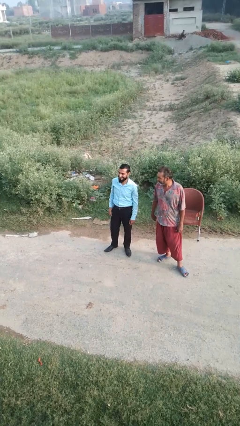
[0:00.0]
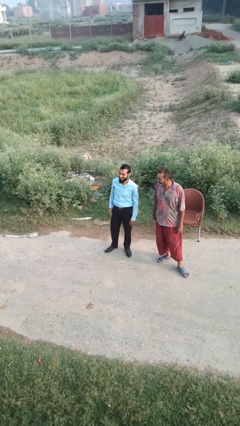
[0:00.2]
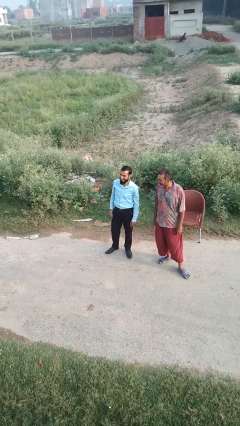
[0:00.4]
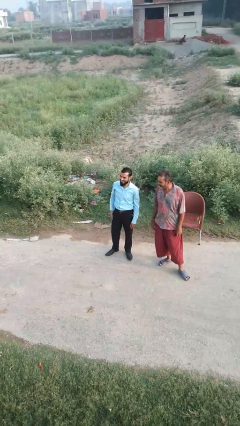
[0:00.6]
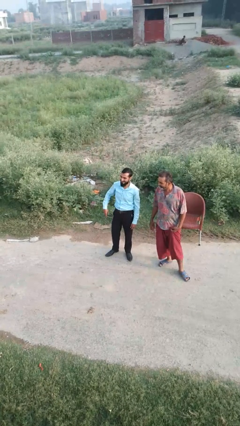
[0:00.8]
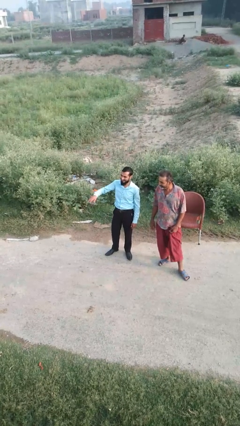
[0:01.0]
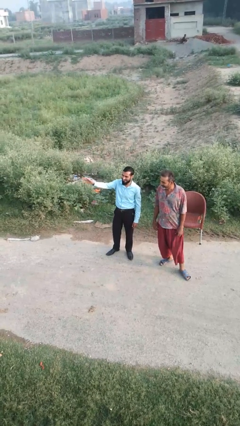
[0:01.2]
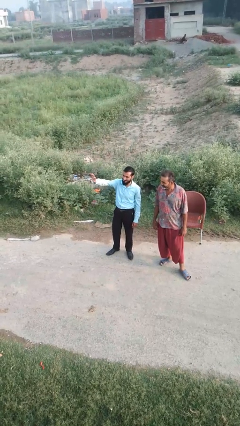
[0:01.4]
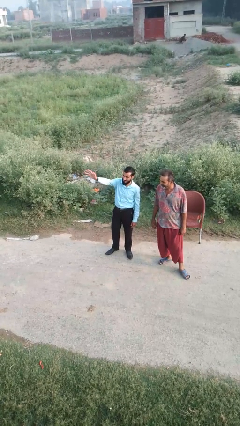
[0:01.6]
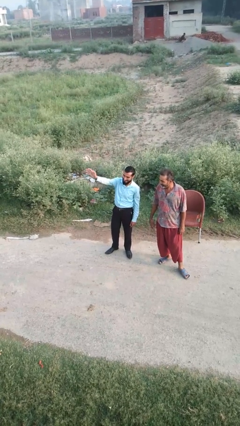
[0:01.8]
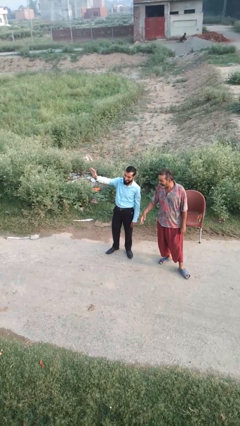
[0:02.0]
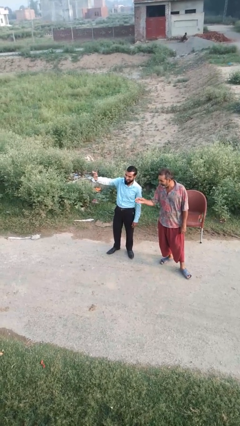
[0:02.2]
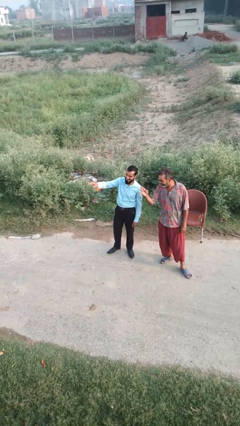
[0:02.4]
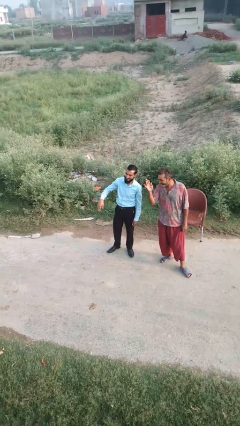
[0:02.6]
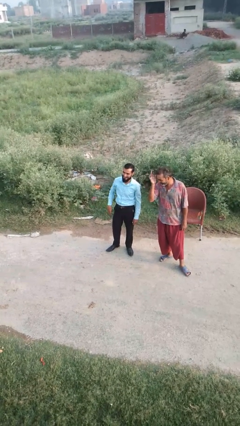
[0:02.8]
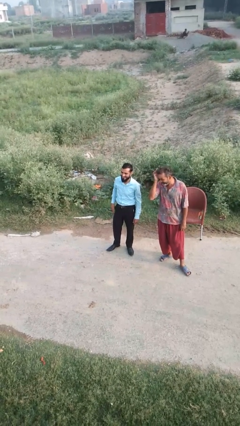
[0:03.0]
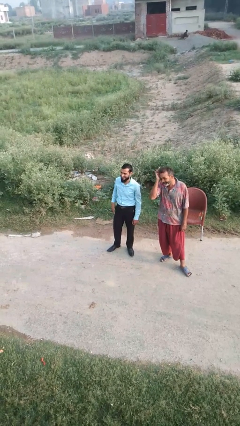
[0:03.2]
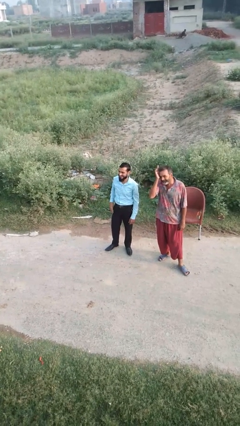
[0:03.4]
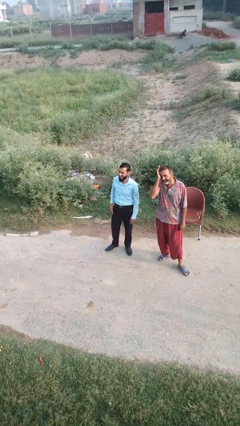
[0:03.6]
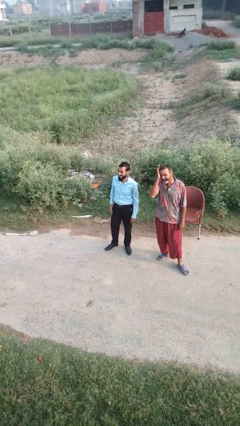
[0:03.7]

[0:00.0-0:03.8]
person waves at person

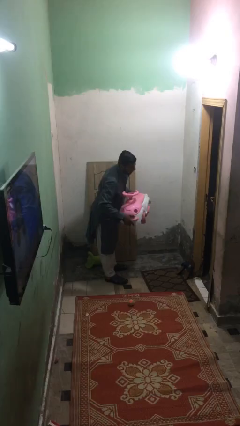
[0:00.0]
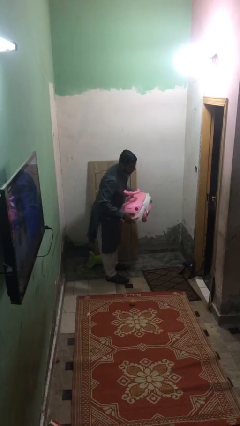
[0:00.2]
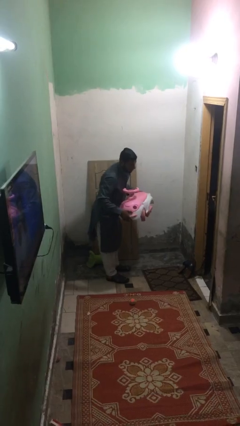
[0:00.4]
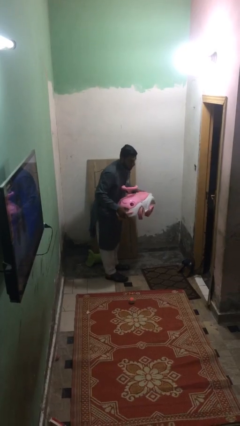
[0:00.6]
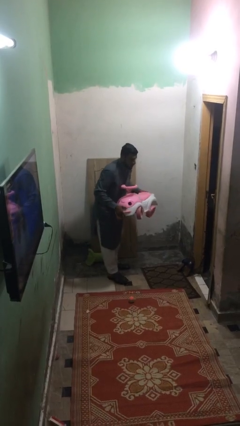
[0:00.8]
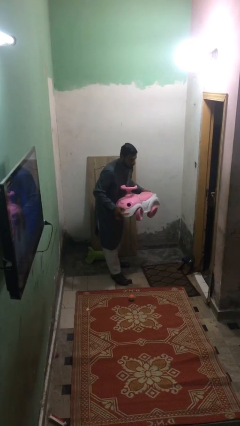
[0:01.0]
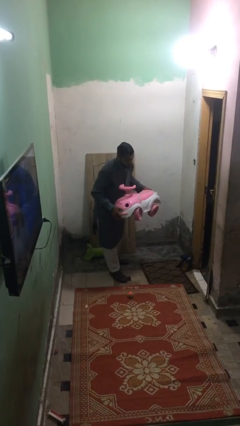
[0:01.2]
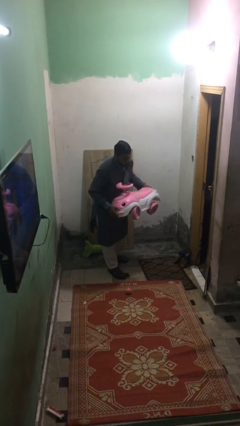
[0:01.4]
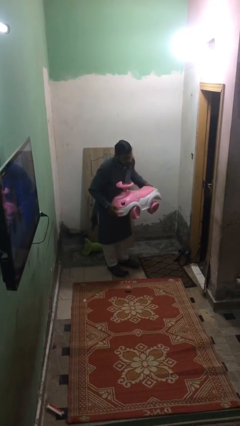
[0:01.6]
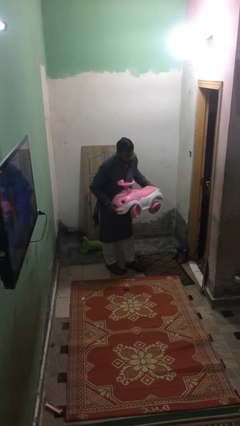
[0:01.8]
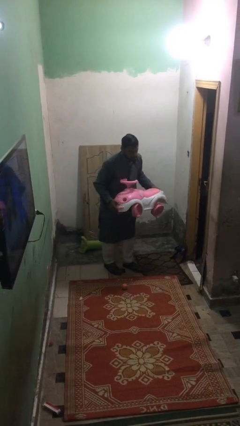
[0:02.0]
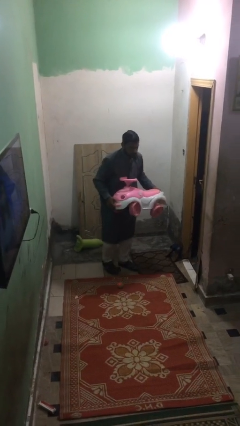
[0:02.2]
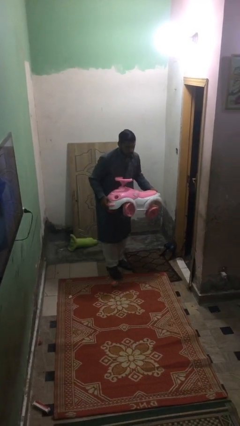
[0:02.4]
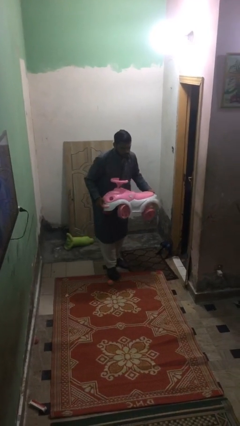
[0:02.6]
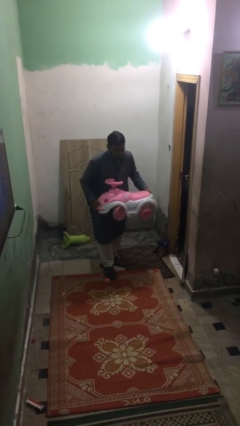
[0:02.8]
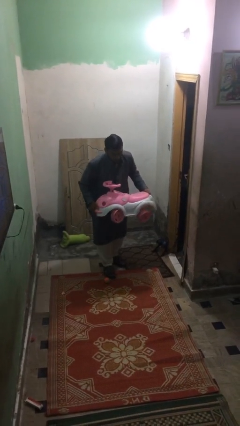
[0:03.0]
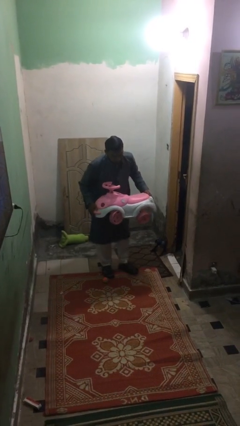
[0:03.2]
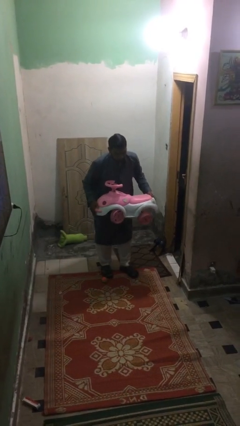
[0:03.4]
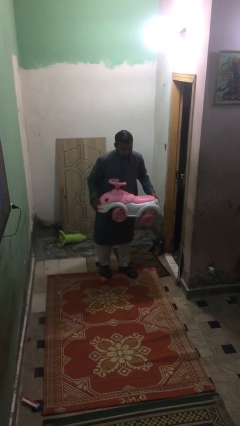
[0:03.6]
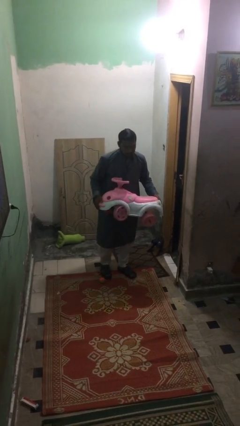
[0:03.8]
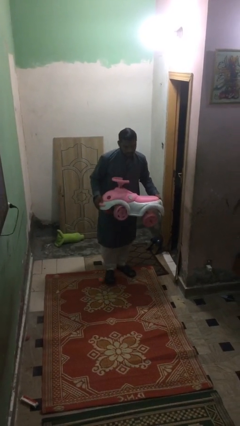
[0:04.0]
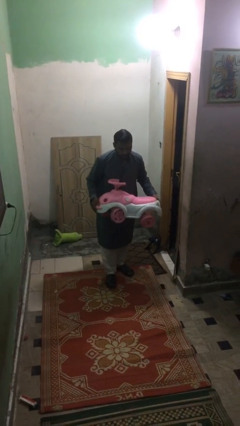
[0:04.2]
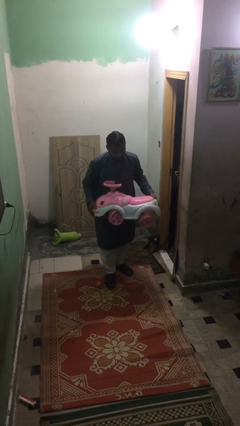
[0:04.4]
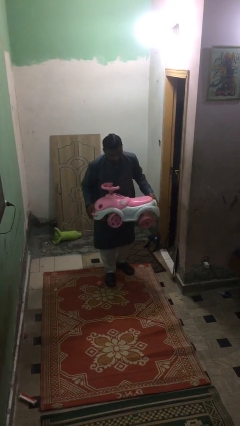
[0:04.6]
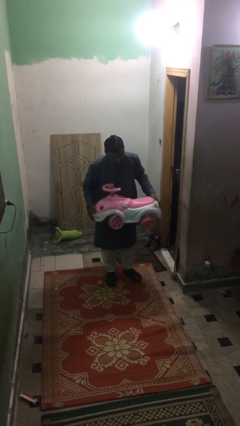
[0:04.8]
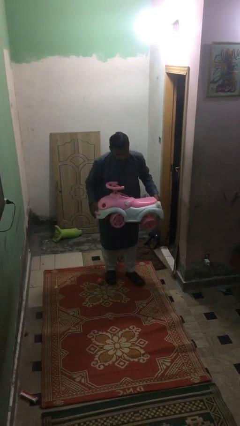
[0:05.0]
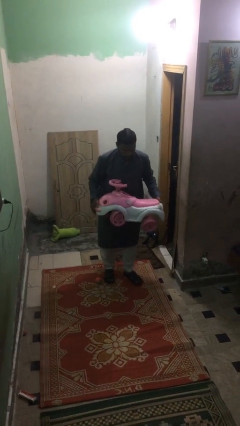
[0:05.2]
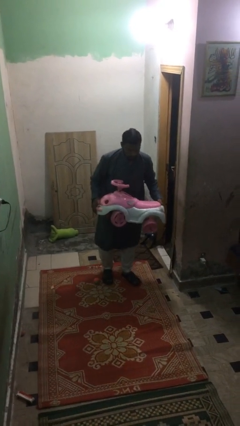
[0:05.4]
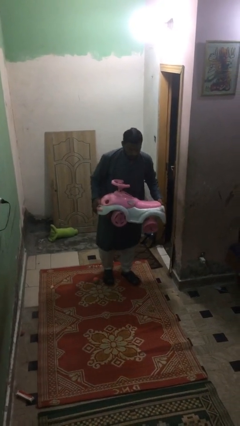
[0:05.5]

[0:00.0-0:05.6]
person carries heavy object

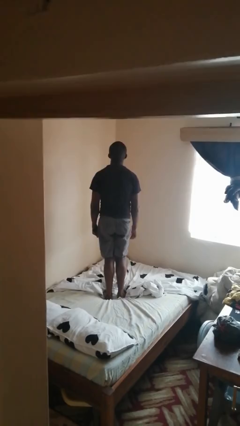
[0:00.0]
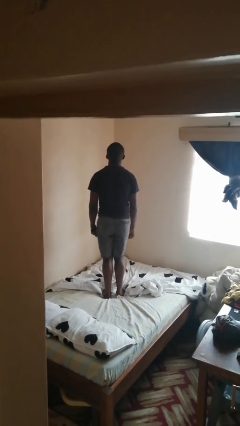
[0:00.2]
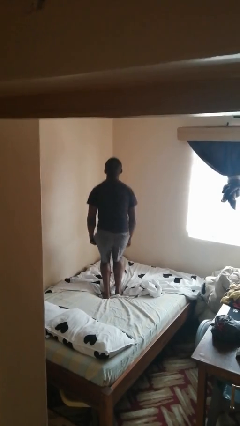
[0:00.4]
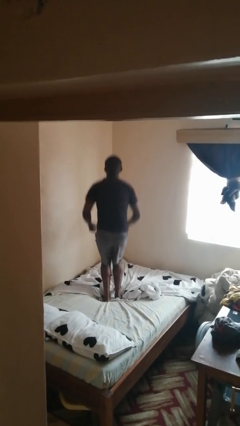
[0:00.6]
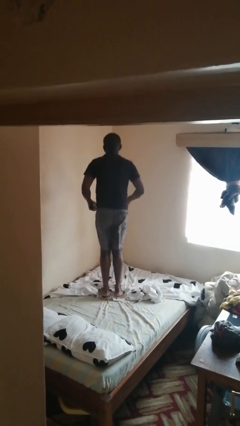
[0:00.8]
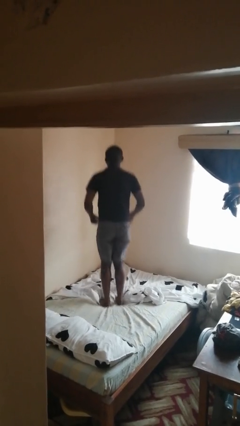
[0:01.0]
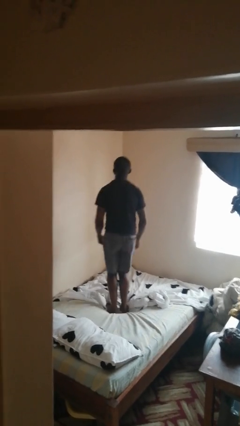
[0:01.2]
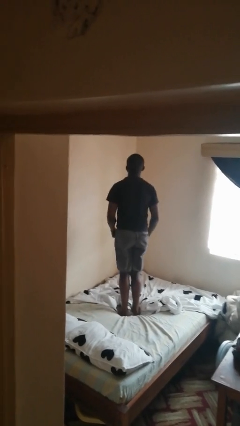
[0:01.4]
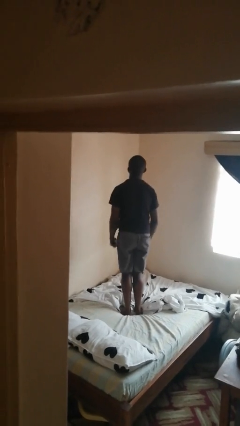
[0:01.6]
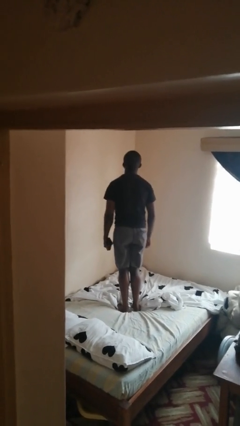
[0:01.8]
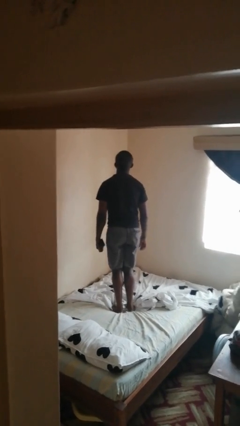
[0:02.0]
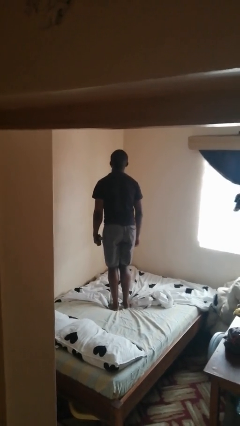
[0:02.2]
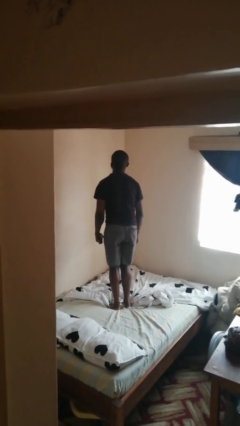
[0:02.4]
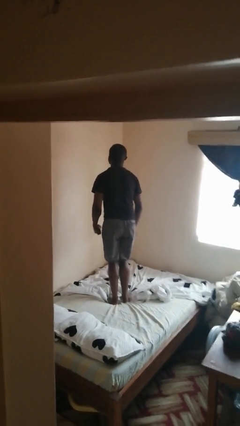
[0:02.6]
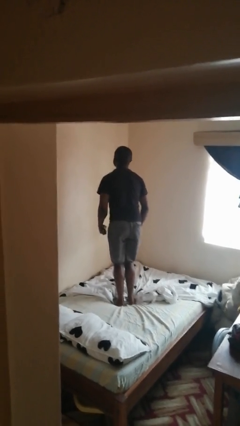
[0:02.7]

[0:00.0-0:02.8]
person jumps on bed

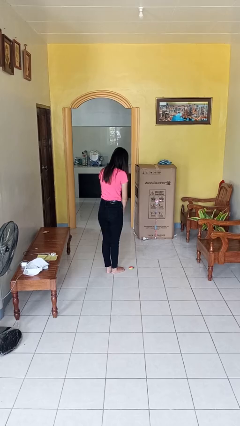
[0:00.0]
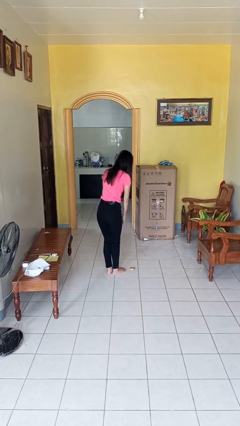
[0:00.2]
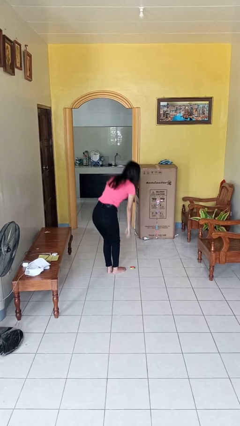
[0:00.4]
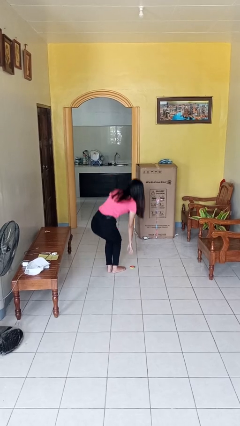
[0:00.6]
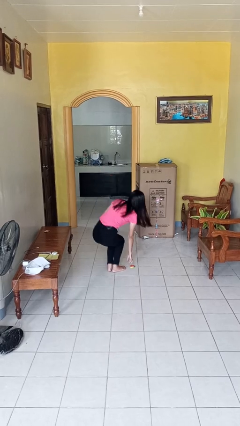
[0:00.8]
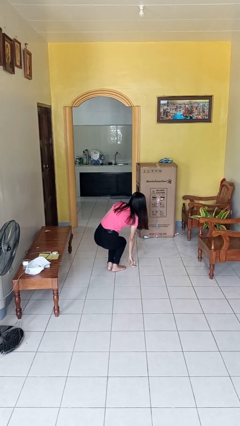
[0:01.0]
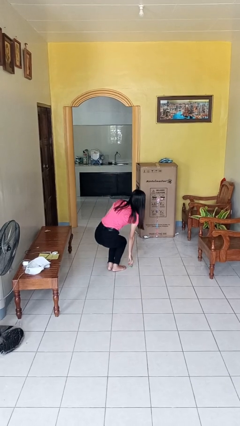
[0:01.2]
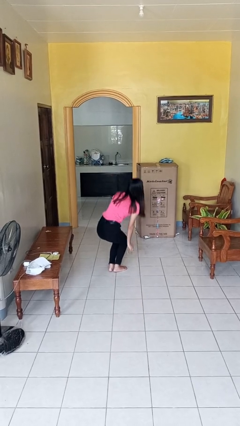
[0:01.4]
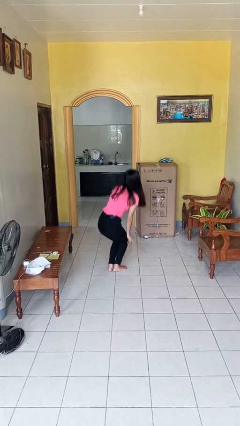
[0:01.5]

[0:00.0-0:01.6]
person picks up object from floor

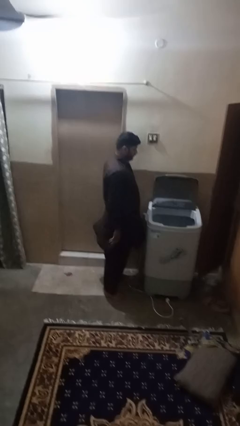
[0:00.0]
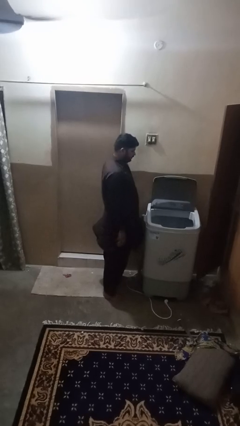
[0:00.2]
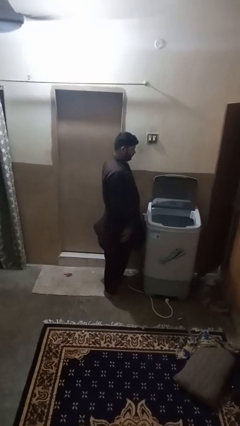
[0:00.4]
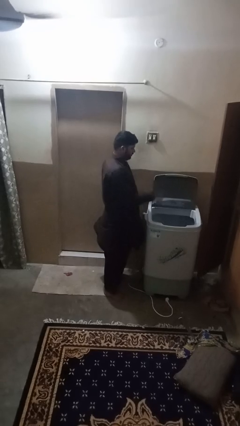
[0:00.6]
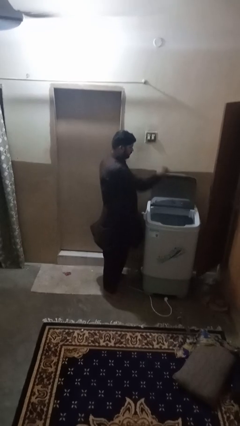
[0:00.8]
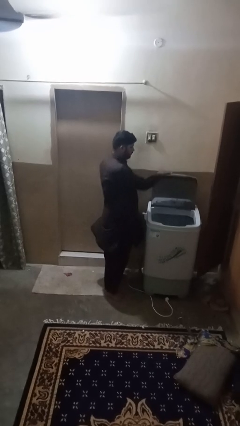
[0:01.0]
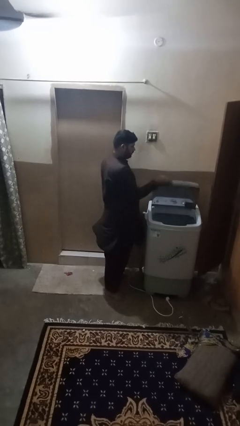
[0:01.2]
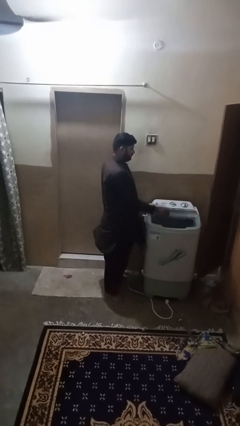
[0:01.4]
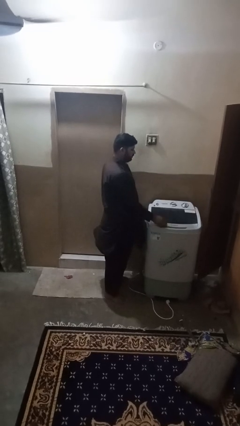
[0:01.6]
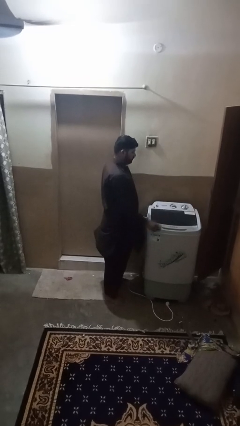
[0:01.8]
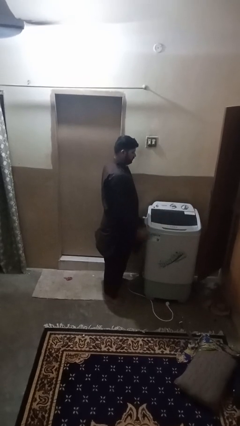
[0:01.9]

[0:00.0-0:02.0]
person closes clothes washer

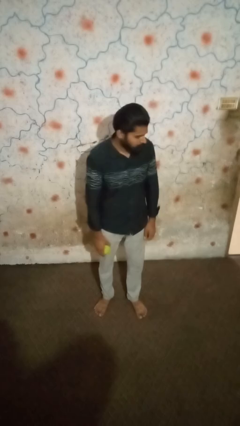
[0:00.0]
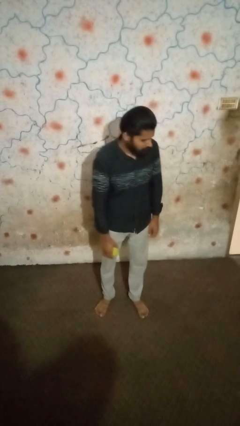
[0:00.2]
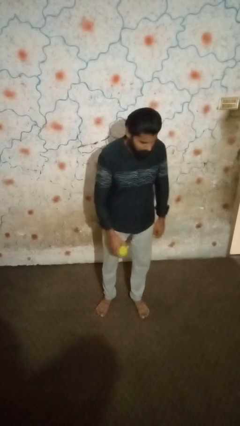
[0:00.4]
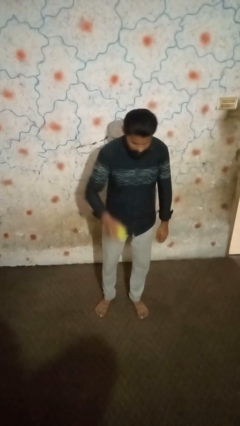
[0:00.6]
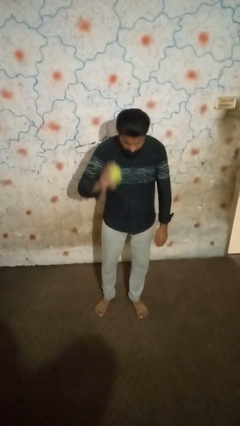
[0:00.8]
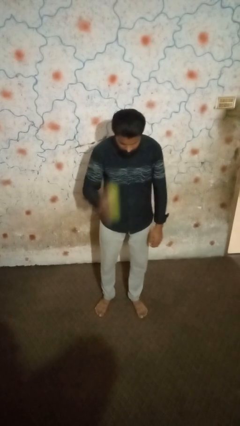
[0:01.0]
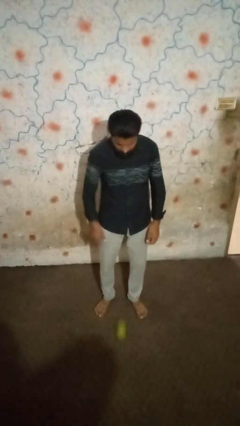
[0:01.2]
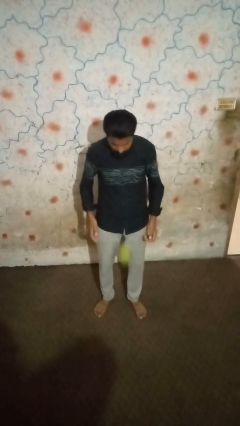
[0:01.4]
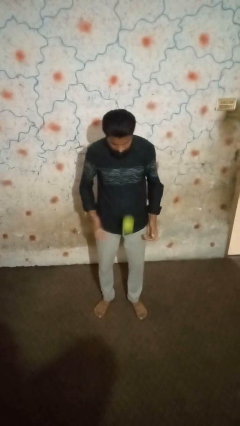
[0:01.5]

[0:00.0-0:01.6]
person bounces ball on floor

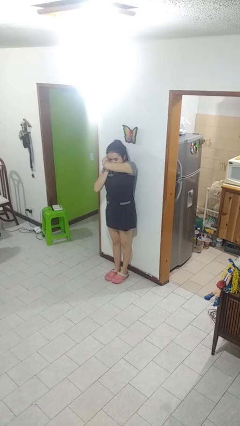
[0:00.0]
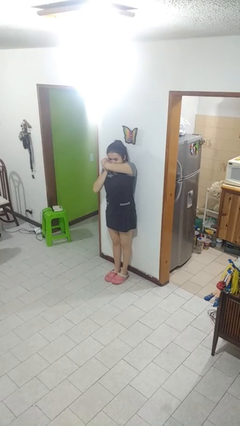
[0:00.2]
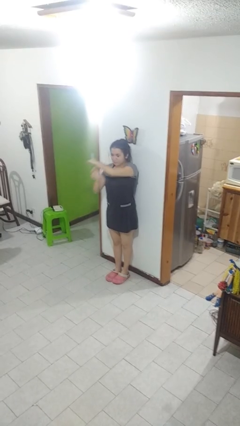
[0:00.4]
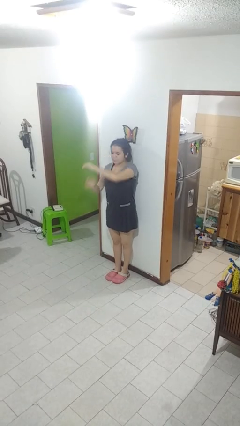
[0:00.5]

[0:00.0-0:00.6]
person sneezes into arm
